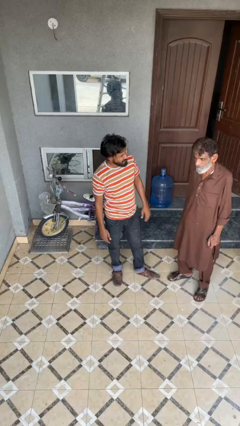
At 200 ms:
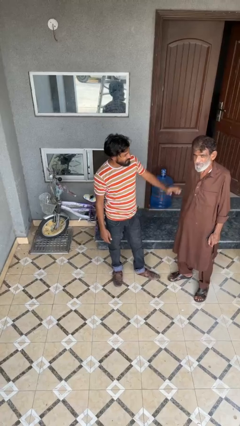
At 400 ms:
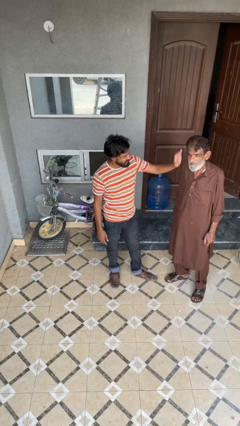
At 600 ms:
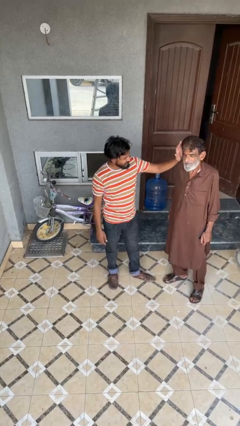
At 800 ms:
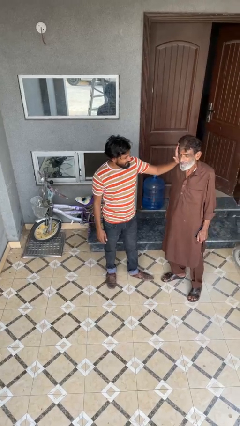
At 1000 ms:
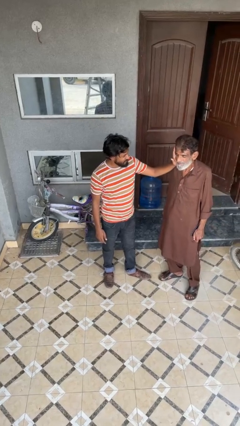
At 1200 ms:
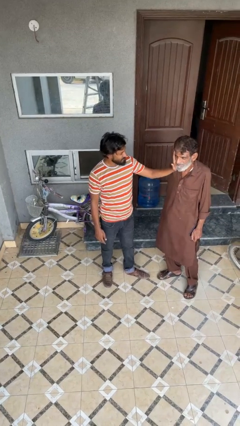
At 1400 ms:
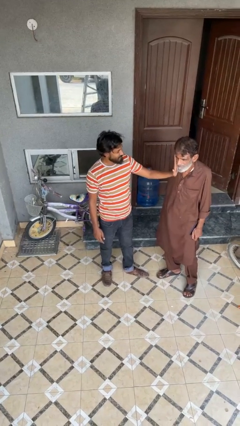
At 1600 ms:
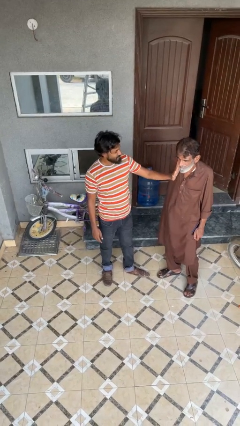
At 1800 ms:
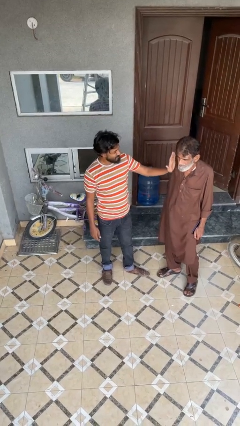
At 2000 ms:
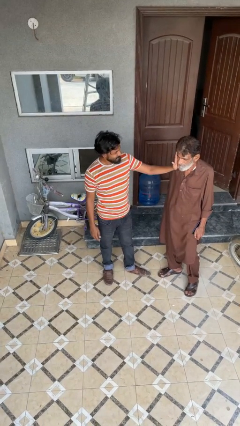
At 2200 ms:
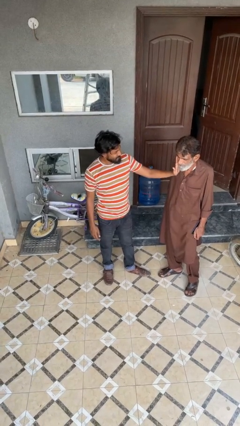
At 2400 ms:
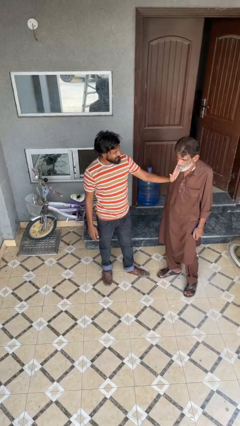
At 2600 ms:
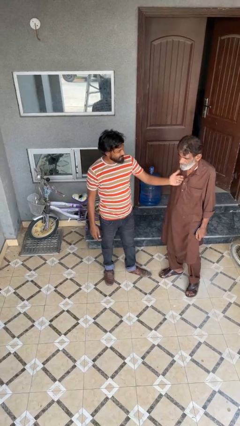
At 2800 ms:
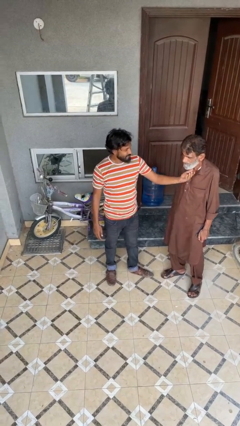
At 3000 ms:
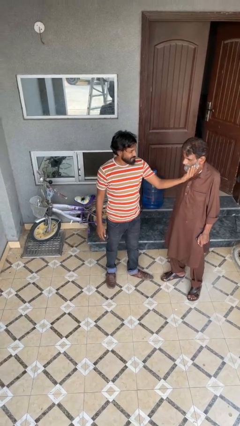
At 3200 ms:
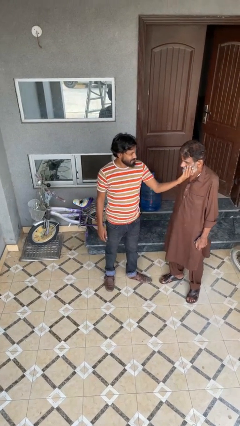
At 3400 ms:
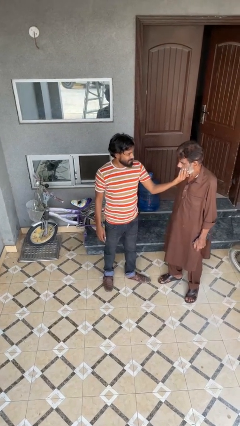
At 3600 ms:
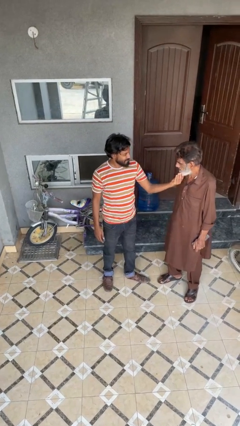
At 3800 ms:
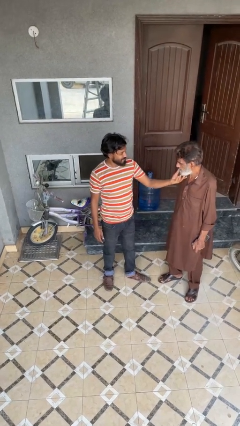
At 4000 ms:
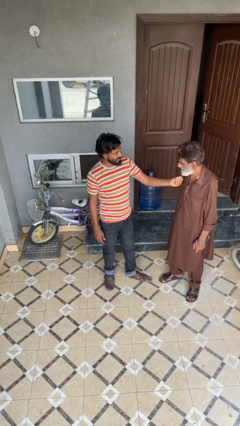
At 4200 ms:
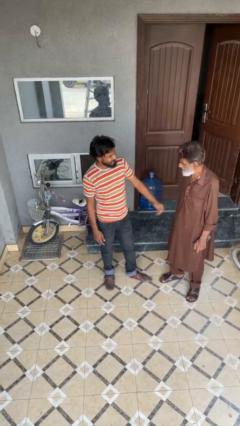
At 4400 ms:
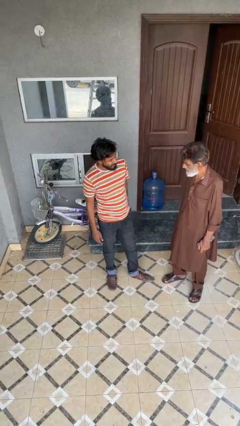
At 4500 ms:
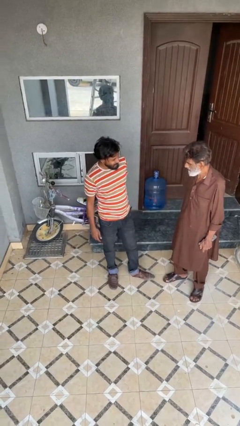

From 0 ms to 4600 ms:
person touches face of person

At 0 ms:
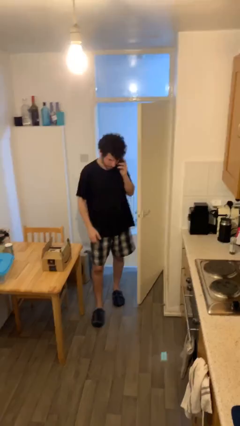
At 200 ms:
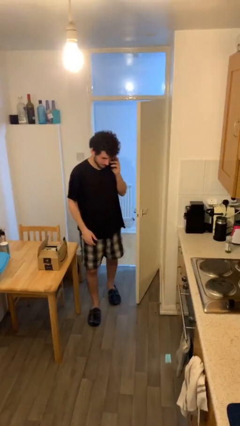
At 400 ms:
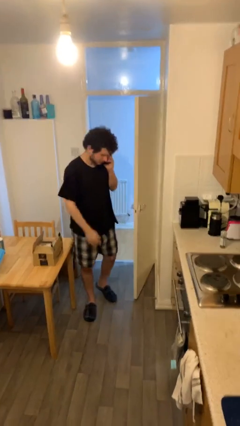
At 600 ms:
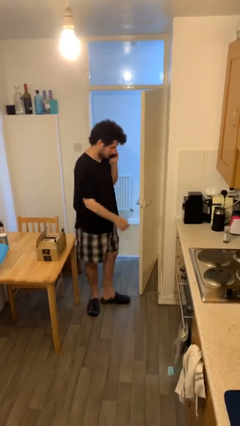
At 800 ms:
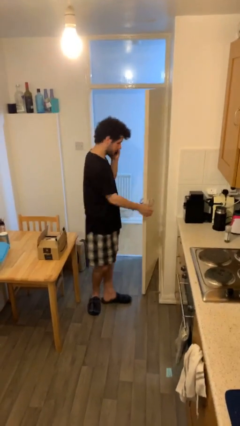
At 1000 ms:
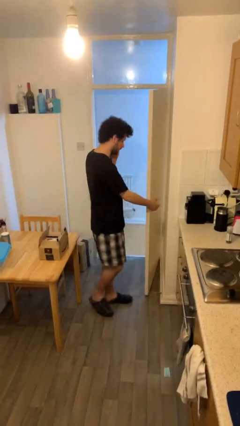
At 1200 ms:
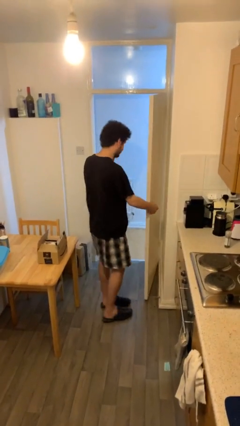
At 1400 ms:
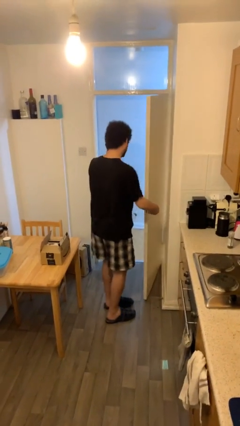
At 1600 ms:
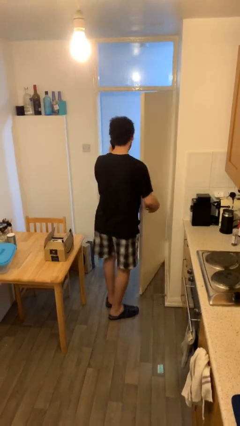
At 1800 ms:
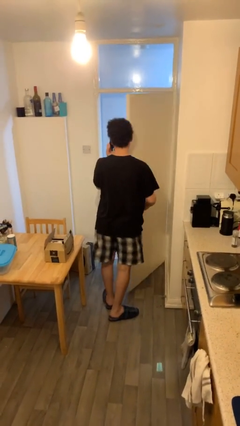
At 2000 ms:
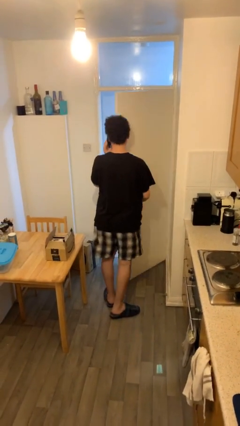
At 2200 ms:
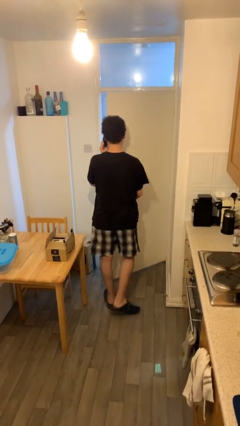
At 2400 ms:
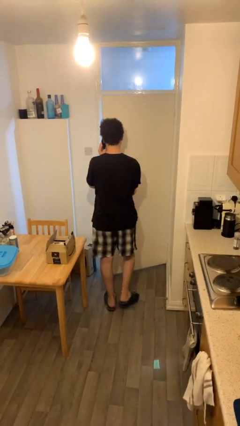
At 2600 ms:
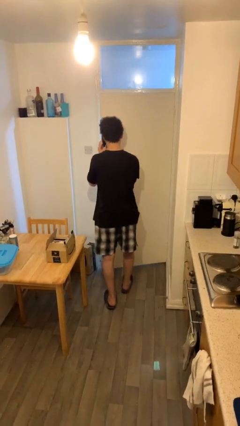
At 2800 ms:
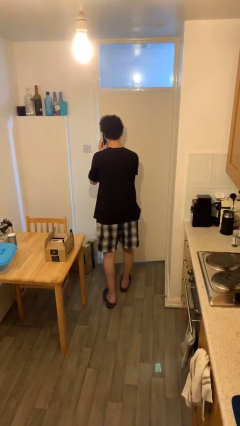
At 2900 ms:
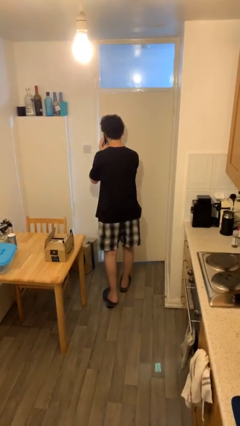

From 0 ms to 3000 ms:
person closes facility door

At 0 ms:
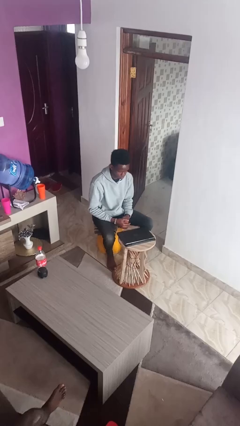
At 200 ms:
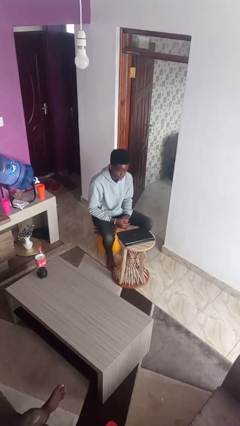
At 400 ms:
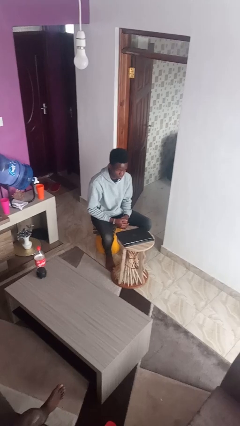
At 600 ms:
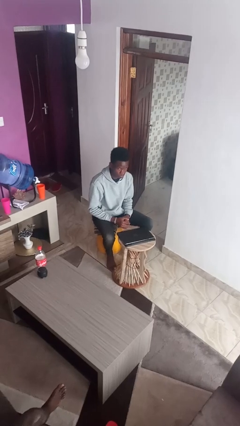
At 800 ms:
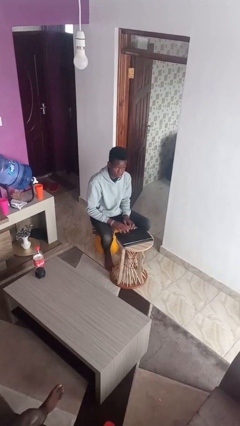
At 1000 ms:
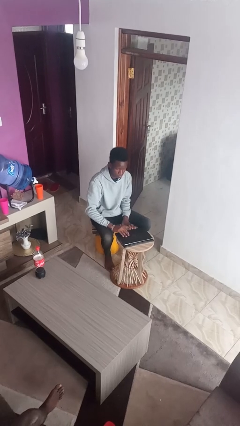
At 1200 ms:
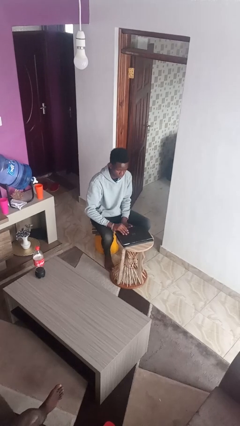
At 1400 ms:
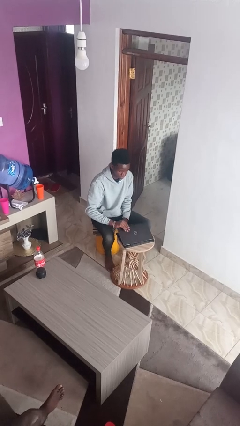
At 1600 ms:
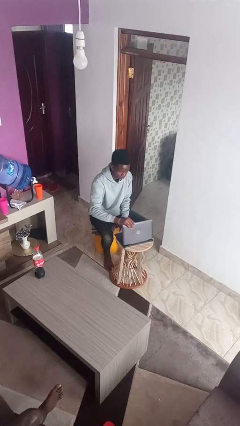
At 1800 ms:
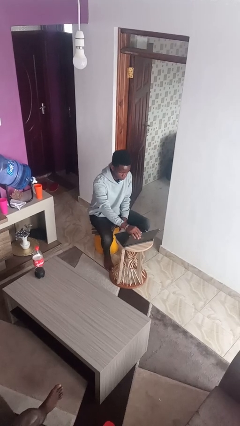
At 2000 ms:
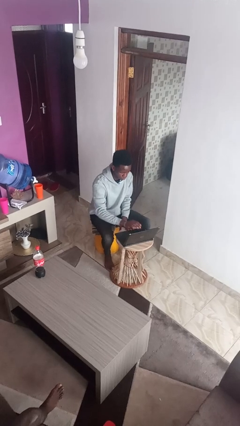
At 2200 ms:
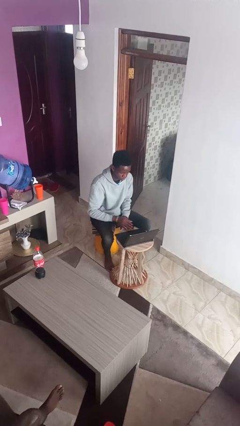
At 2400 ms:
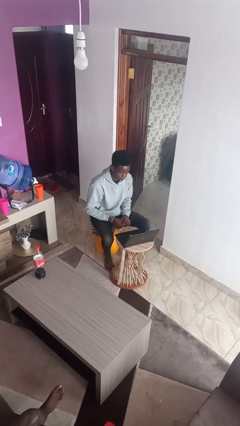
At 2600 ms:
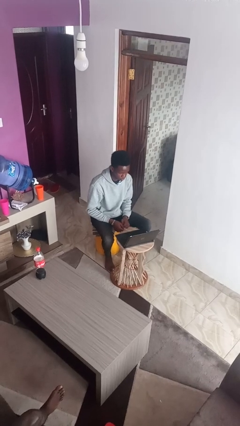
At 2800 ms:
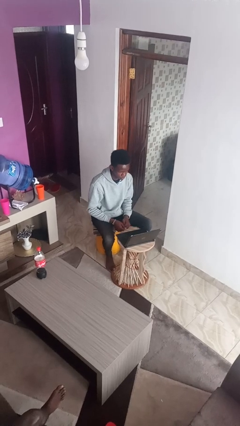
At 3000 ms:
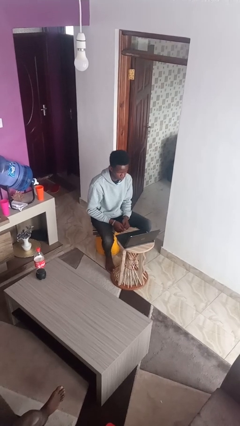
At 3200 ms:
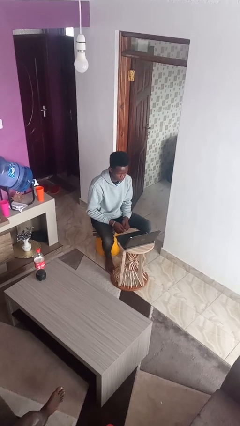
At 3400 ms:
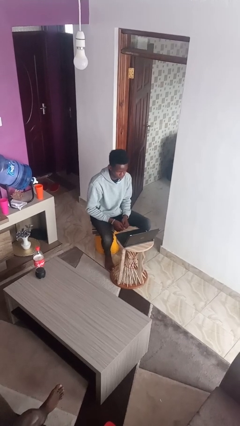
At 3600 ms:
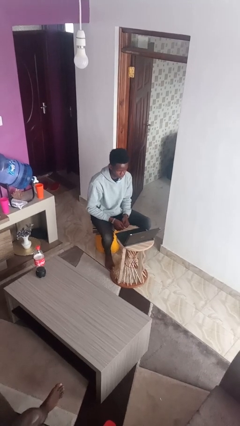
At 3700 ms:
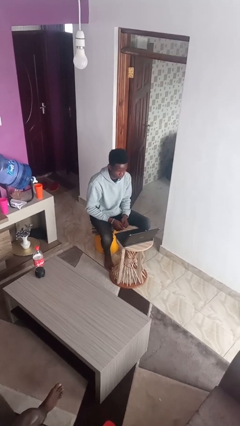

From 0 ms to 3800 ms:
person opens laptop

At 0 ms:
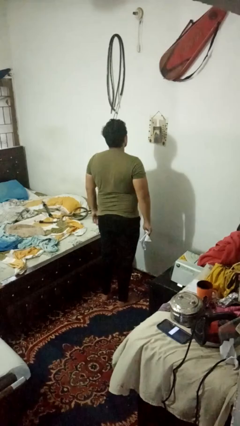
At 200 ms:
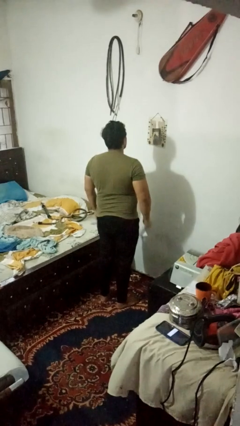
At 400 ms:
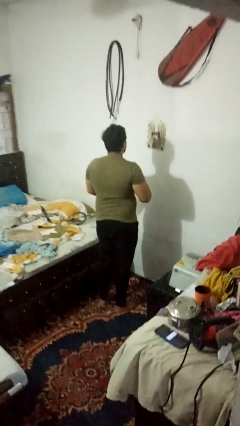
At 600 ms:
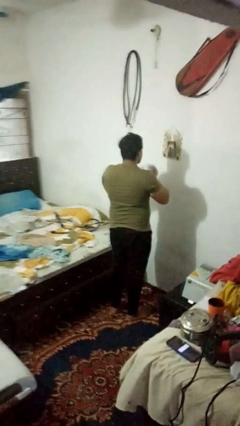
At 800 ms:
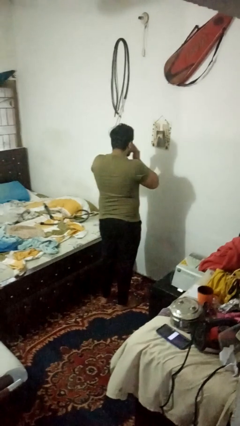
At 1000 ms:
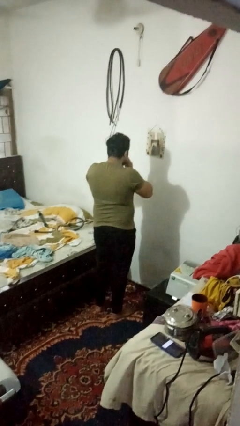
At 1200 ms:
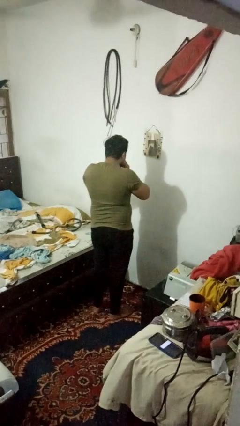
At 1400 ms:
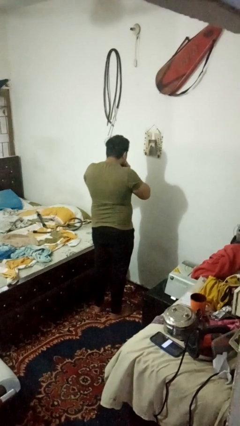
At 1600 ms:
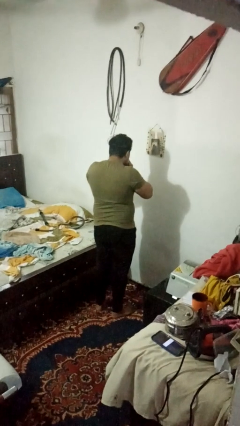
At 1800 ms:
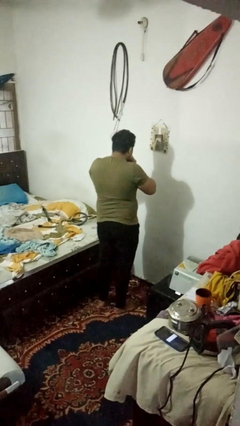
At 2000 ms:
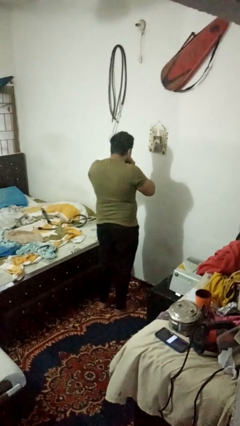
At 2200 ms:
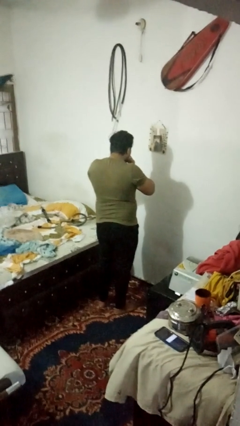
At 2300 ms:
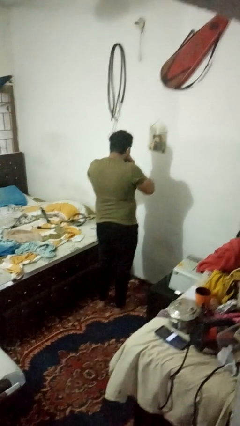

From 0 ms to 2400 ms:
person blows nose

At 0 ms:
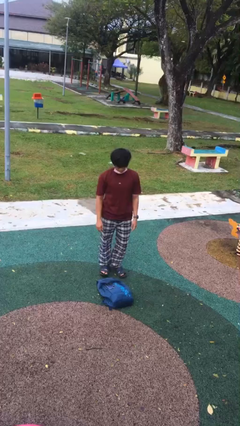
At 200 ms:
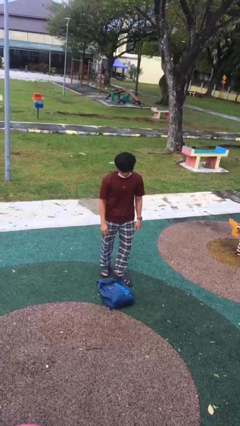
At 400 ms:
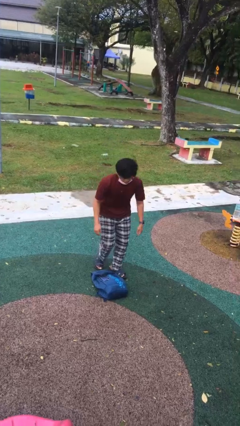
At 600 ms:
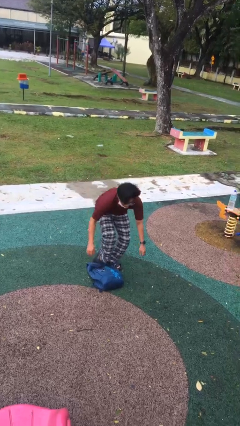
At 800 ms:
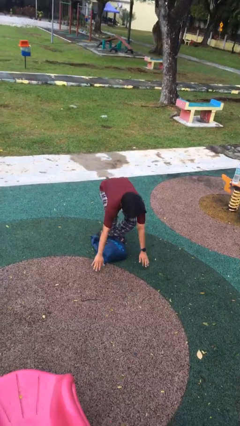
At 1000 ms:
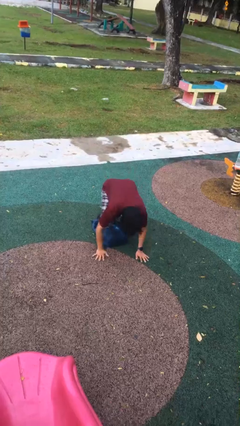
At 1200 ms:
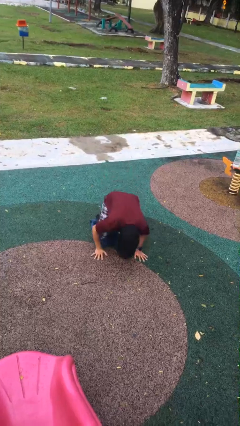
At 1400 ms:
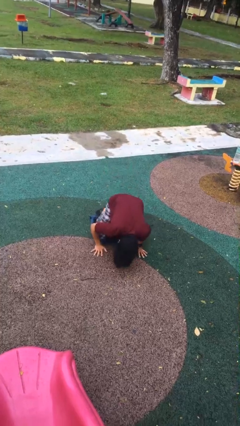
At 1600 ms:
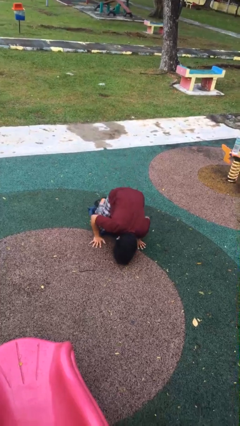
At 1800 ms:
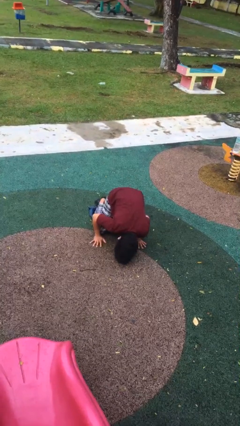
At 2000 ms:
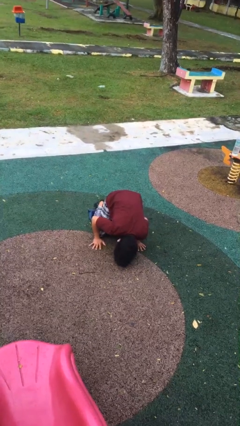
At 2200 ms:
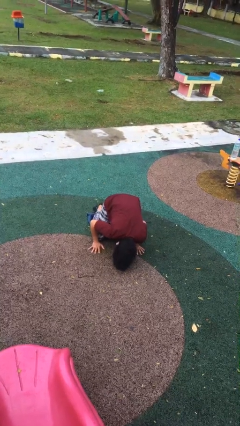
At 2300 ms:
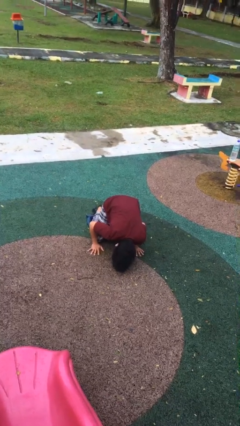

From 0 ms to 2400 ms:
person trips on object on floor

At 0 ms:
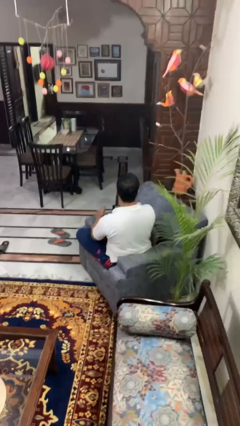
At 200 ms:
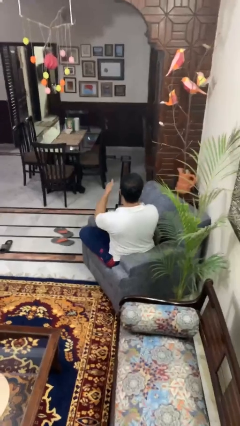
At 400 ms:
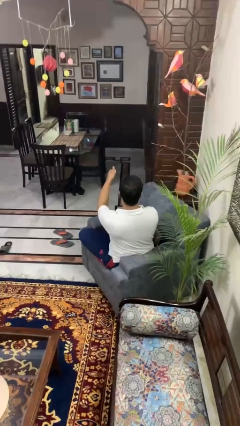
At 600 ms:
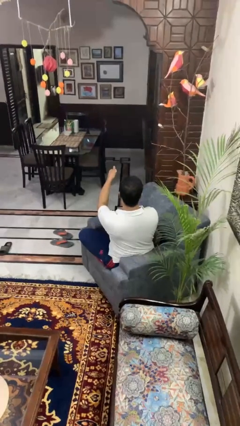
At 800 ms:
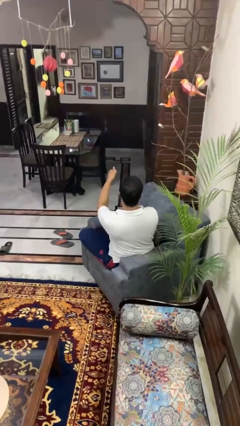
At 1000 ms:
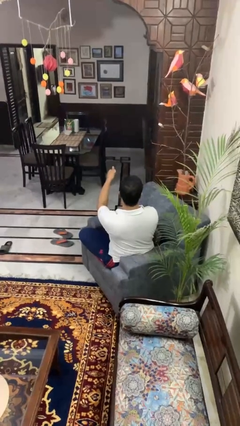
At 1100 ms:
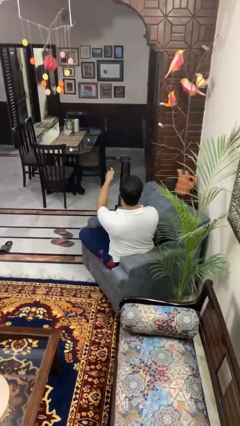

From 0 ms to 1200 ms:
person gestures thumbs up
